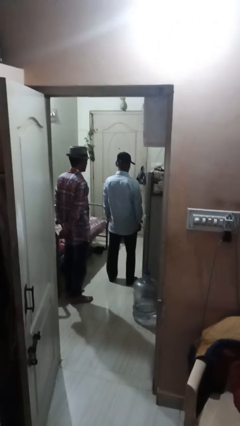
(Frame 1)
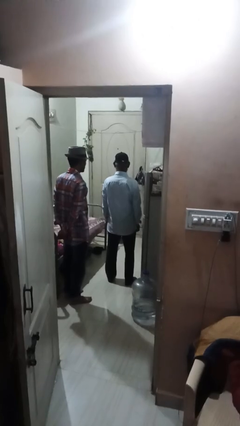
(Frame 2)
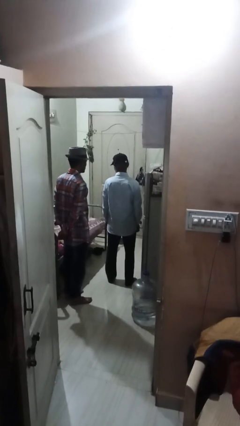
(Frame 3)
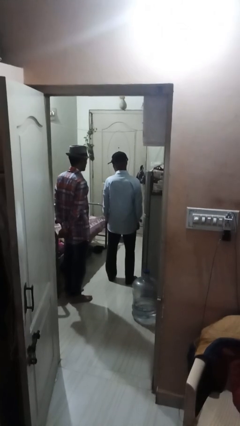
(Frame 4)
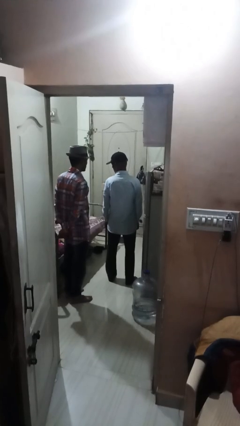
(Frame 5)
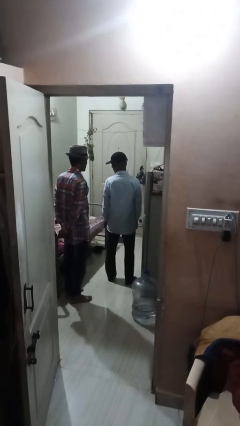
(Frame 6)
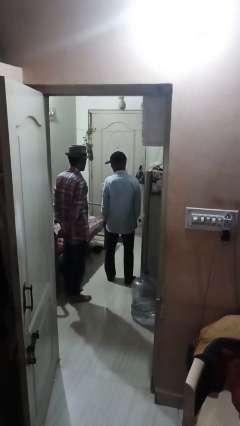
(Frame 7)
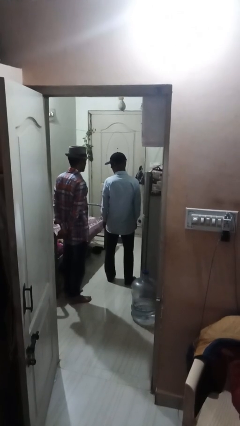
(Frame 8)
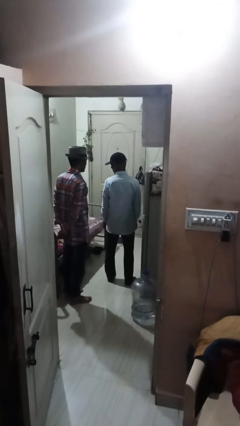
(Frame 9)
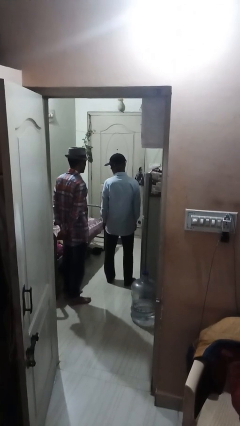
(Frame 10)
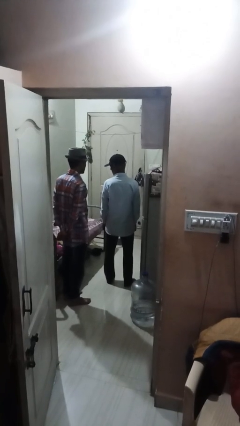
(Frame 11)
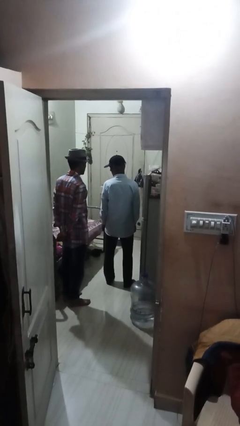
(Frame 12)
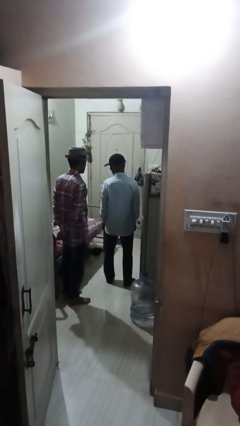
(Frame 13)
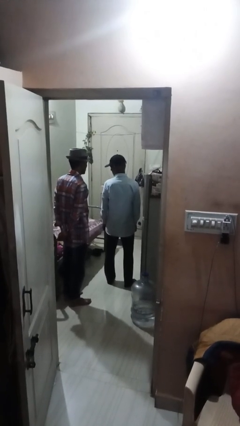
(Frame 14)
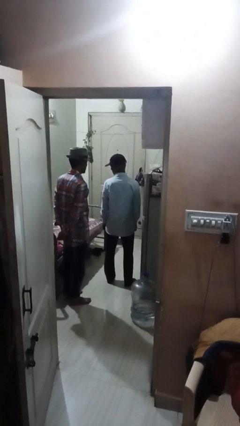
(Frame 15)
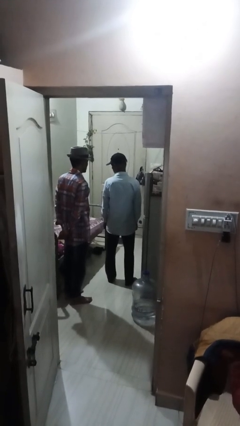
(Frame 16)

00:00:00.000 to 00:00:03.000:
person looks over shoulder

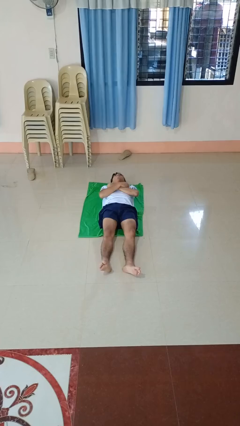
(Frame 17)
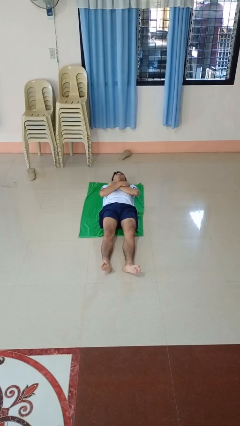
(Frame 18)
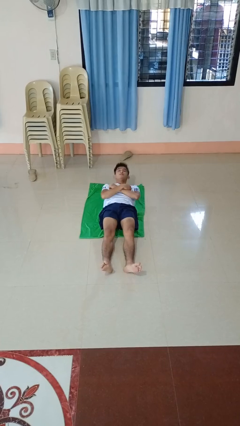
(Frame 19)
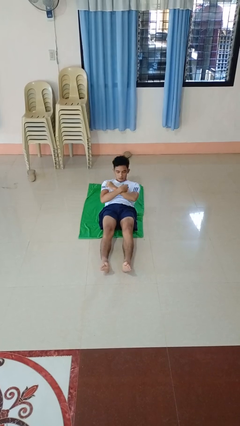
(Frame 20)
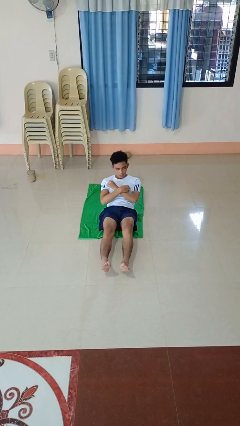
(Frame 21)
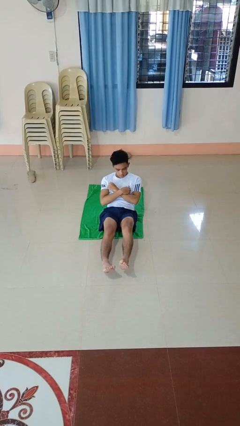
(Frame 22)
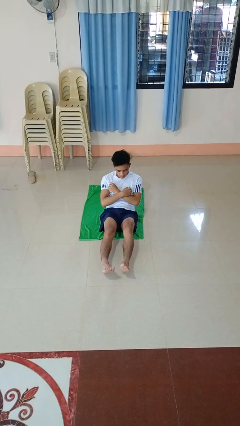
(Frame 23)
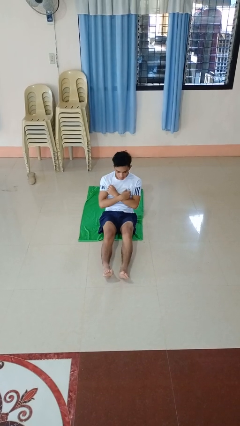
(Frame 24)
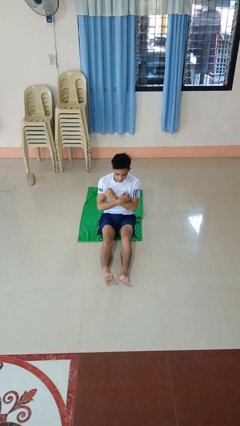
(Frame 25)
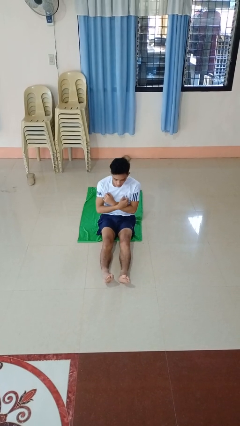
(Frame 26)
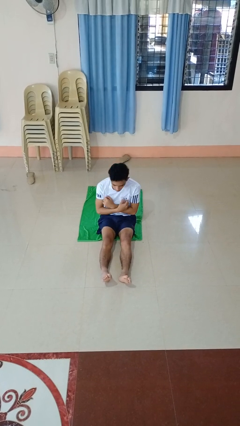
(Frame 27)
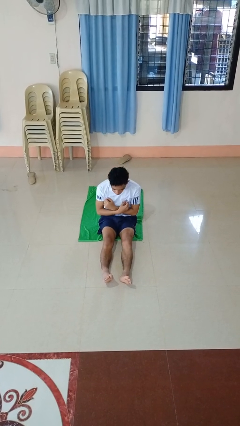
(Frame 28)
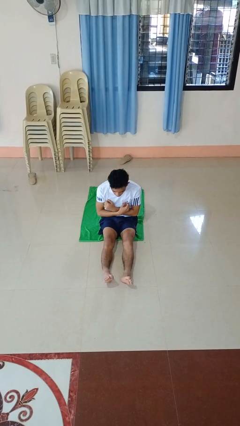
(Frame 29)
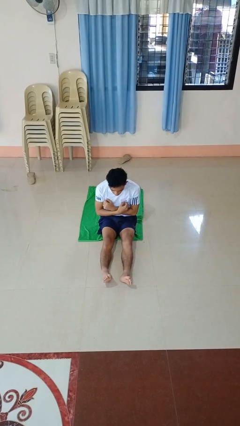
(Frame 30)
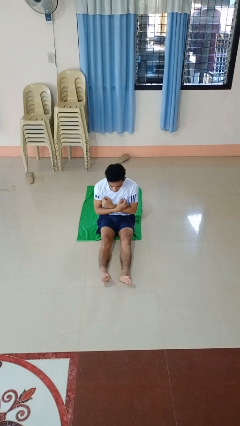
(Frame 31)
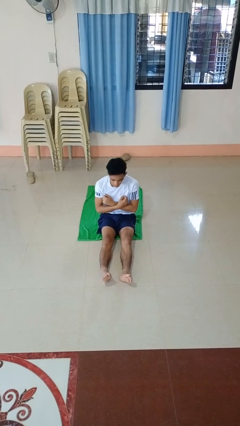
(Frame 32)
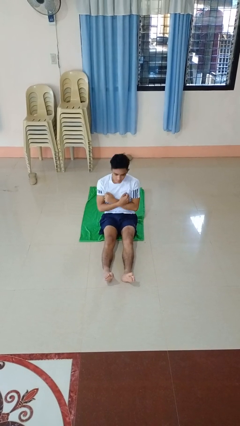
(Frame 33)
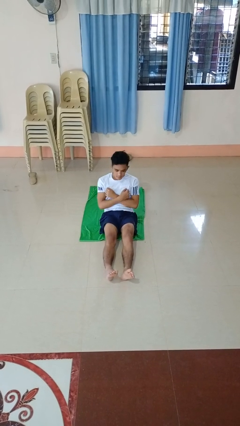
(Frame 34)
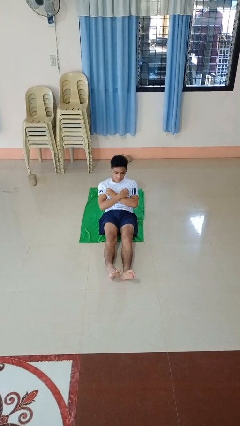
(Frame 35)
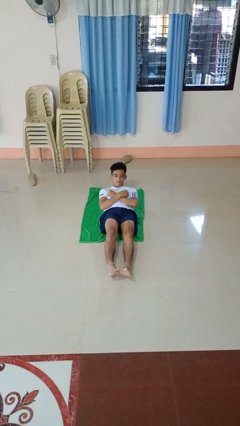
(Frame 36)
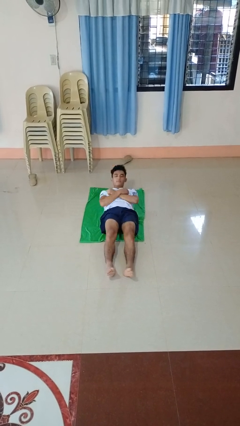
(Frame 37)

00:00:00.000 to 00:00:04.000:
person exercises with situp

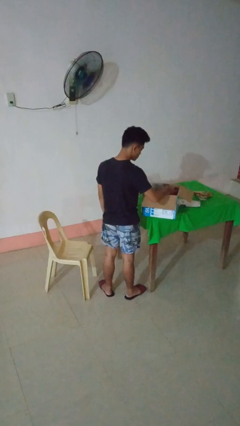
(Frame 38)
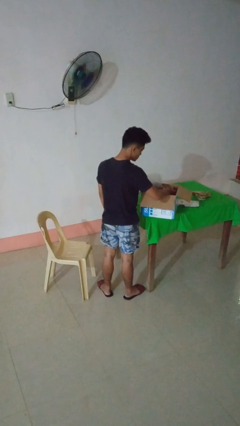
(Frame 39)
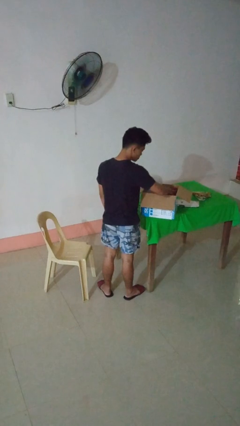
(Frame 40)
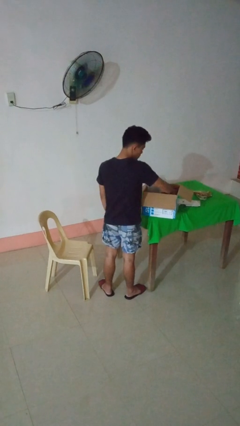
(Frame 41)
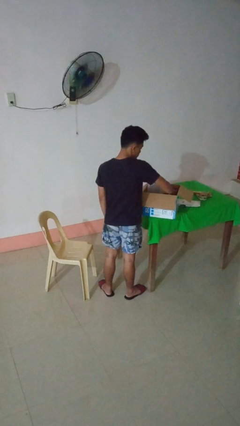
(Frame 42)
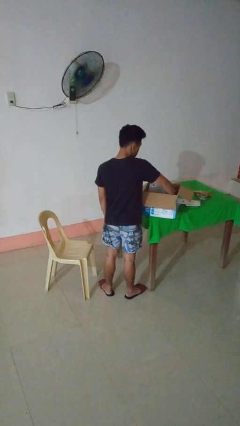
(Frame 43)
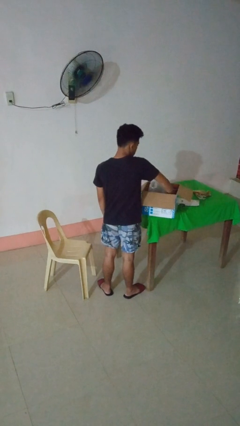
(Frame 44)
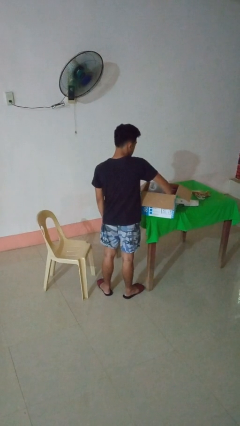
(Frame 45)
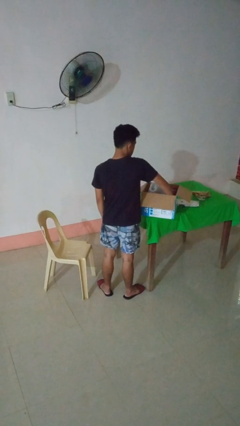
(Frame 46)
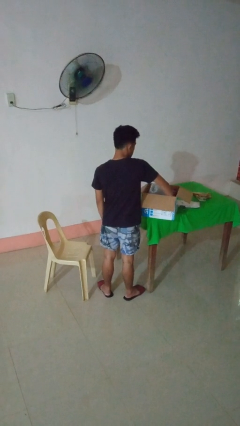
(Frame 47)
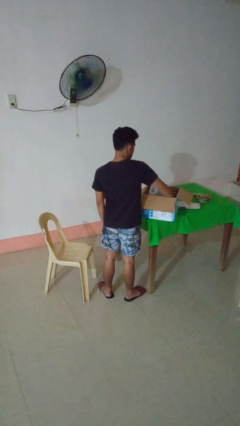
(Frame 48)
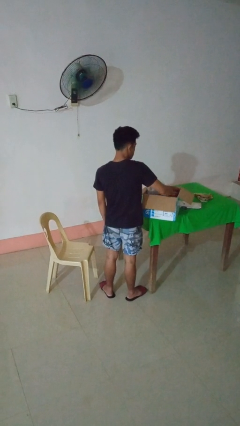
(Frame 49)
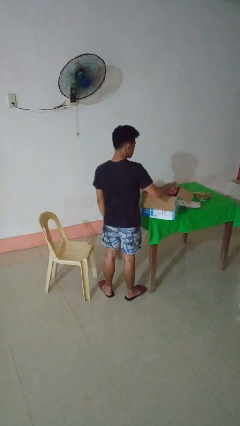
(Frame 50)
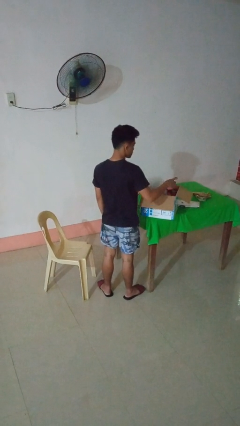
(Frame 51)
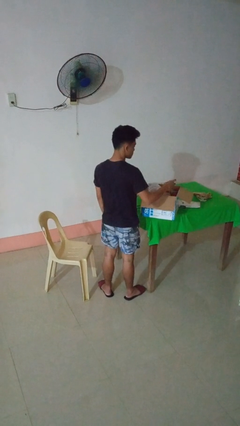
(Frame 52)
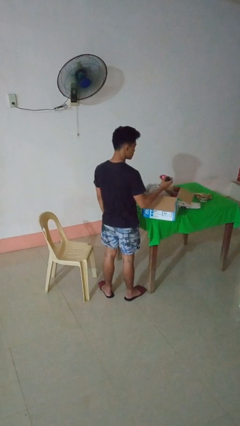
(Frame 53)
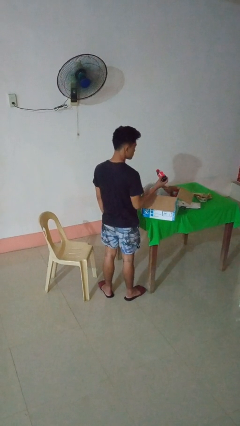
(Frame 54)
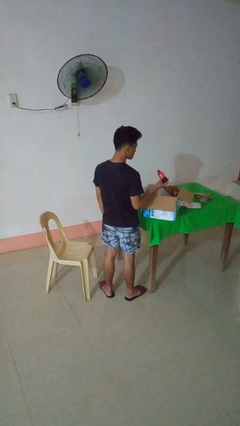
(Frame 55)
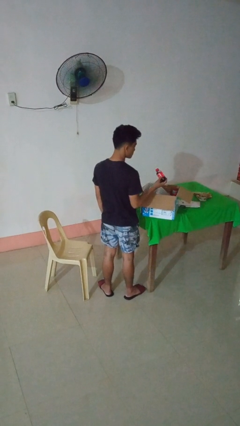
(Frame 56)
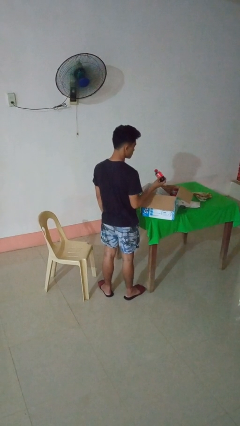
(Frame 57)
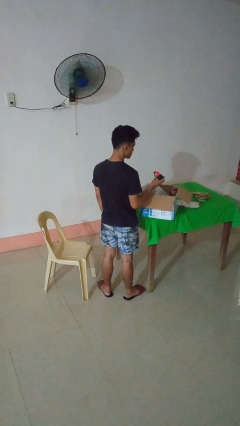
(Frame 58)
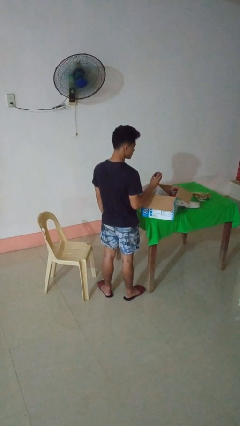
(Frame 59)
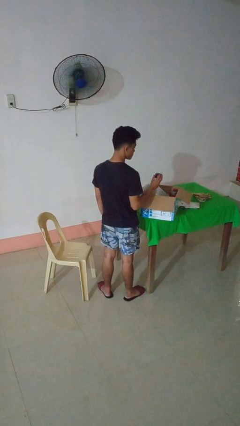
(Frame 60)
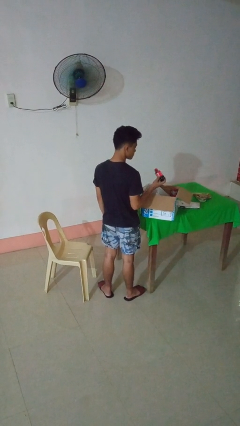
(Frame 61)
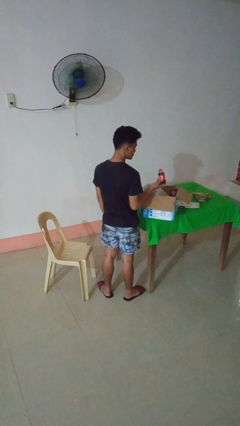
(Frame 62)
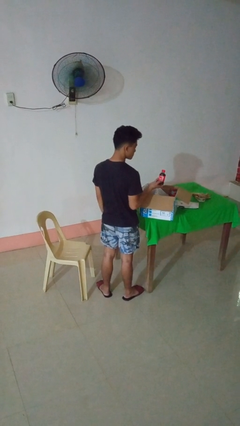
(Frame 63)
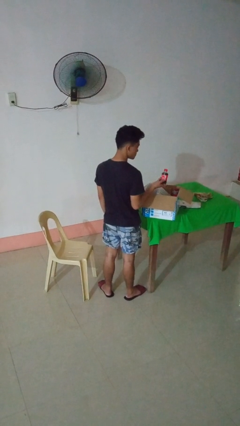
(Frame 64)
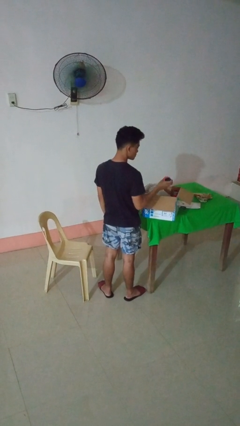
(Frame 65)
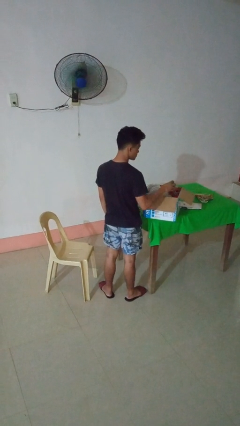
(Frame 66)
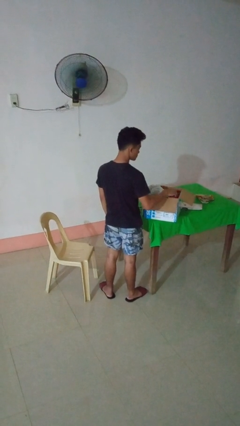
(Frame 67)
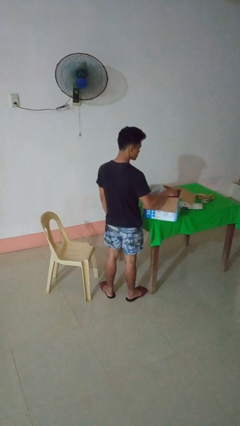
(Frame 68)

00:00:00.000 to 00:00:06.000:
person takes object from box

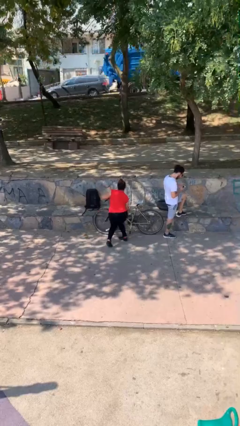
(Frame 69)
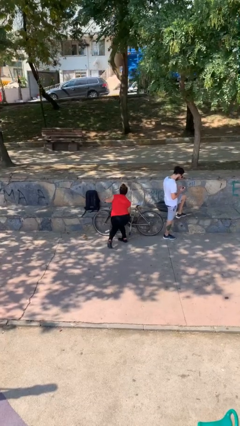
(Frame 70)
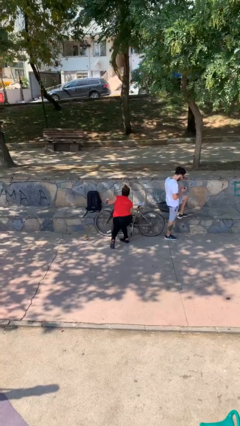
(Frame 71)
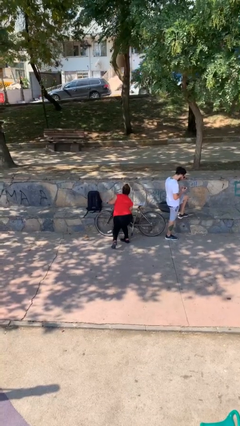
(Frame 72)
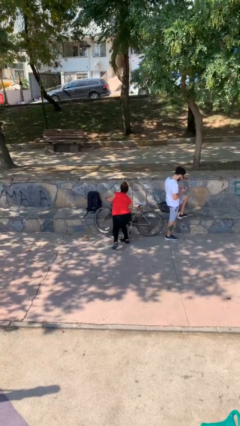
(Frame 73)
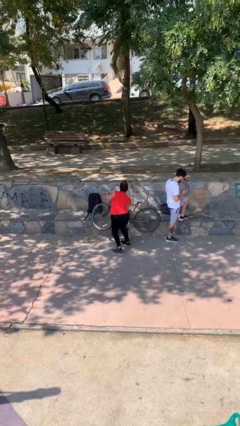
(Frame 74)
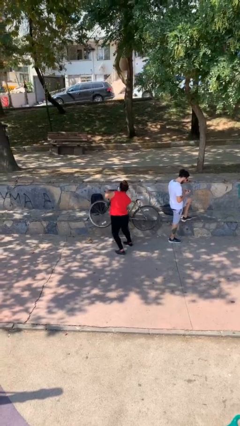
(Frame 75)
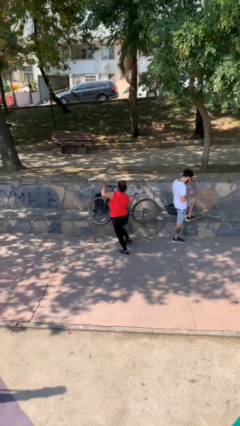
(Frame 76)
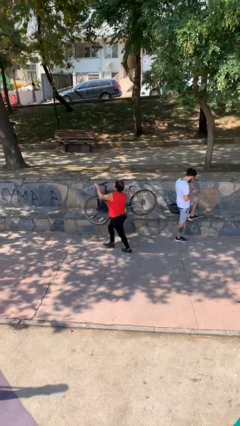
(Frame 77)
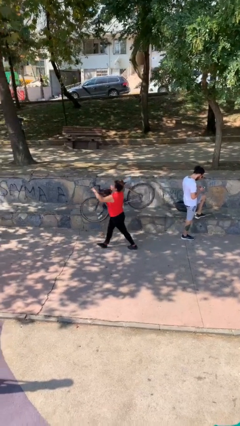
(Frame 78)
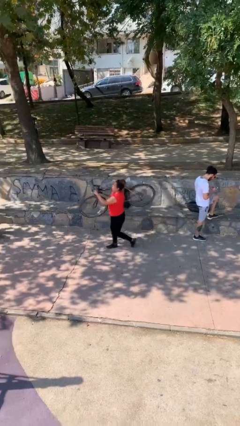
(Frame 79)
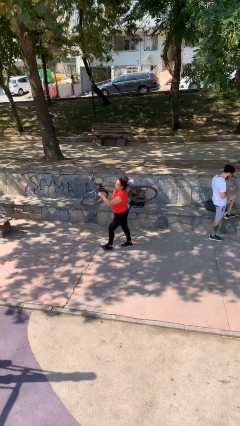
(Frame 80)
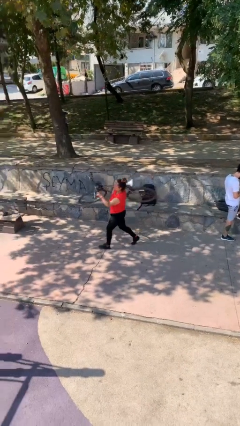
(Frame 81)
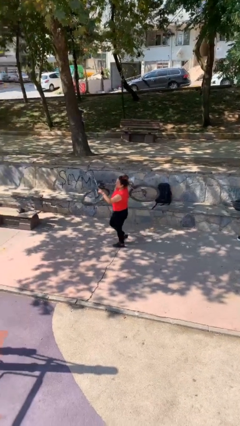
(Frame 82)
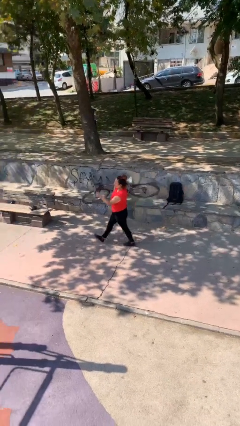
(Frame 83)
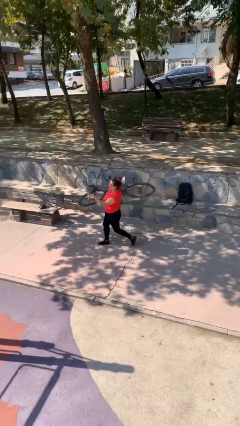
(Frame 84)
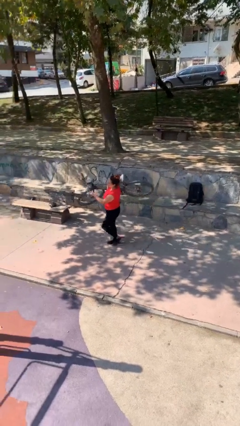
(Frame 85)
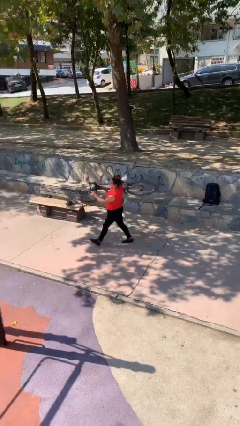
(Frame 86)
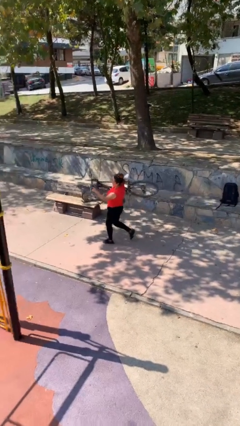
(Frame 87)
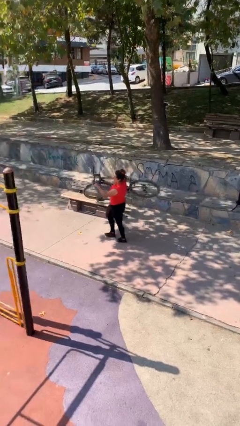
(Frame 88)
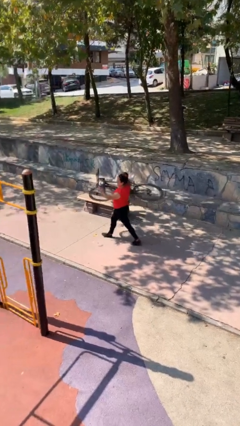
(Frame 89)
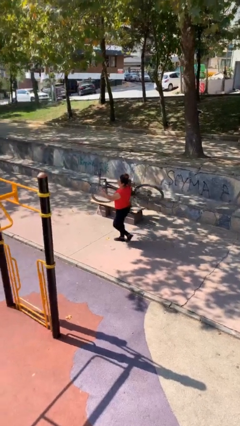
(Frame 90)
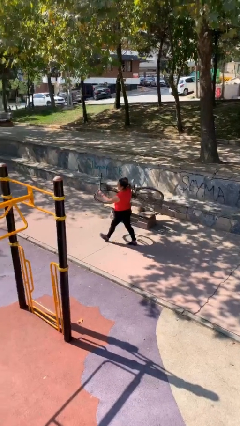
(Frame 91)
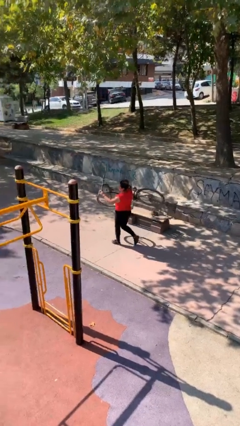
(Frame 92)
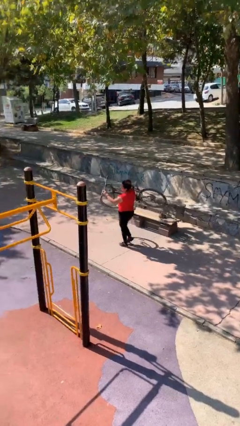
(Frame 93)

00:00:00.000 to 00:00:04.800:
person steals object from person
